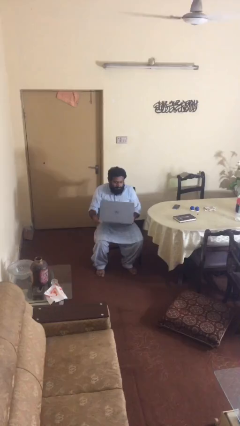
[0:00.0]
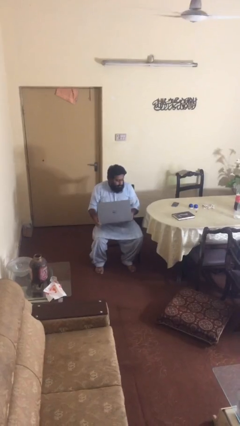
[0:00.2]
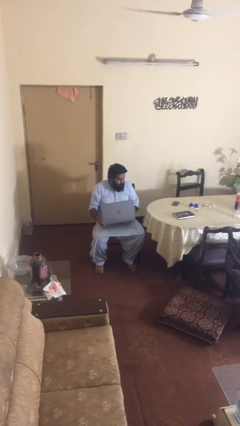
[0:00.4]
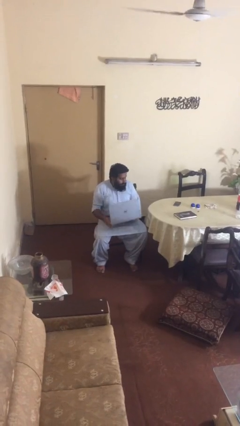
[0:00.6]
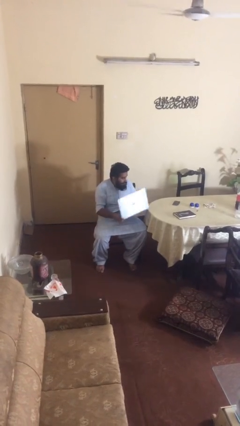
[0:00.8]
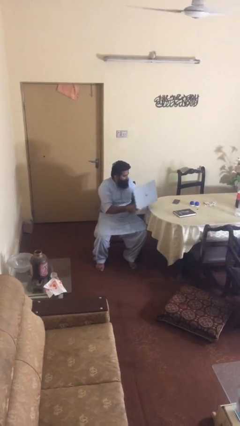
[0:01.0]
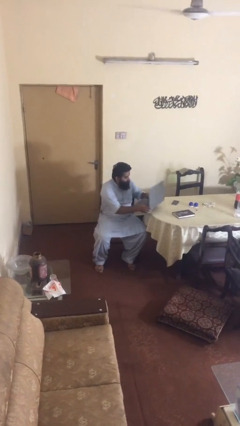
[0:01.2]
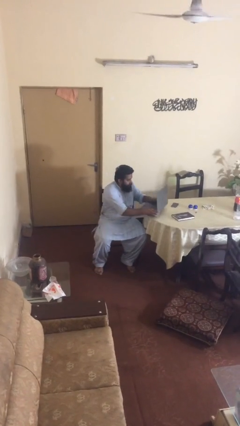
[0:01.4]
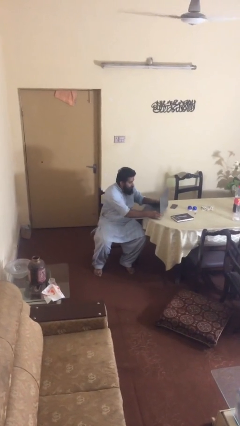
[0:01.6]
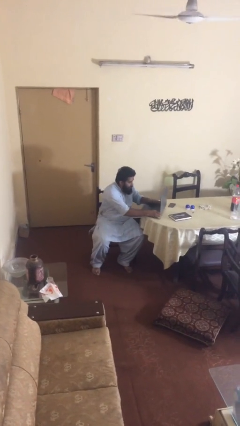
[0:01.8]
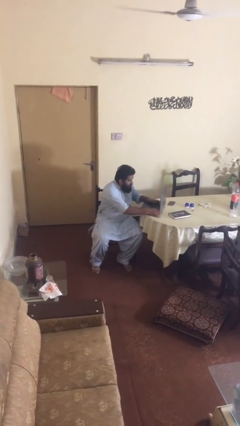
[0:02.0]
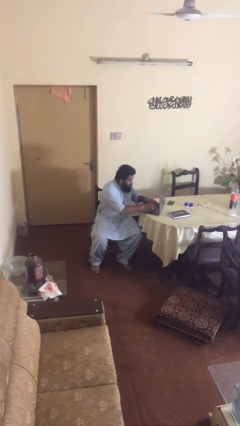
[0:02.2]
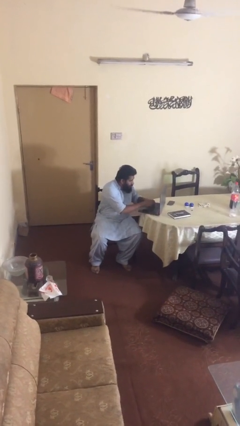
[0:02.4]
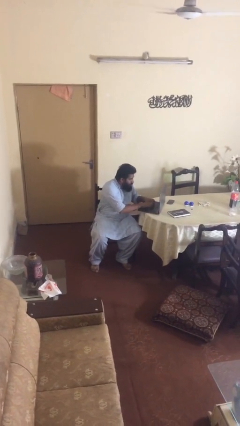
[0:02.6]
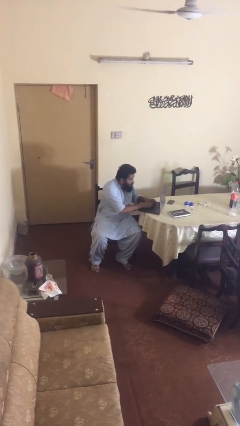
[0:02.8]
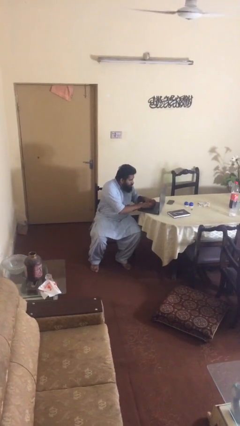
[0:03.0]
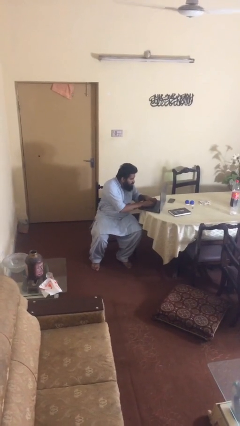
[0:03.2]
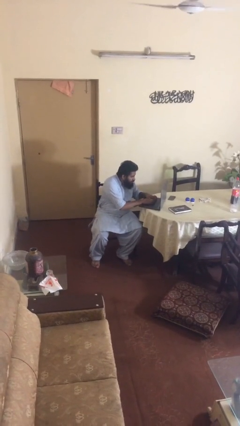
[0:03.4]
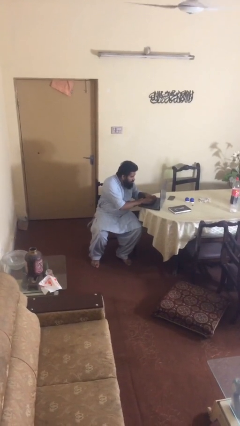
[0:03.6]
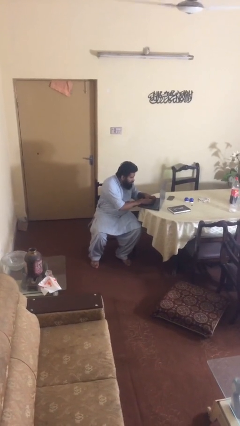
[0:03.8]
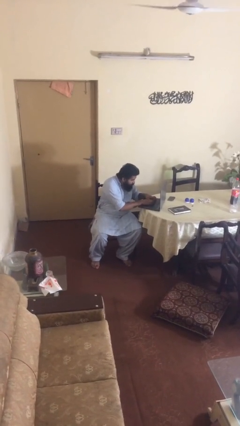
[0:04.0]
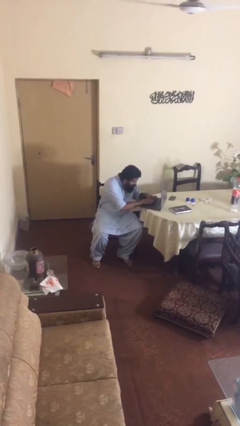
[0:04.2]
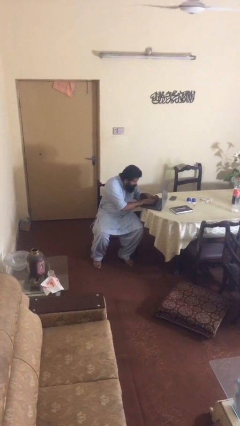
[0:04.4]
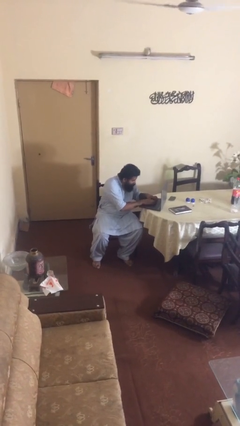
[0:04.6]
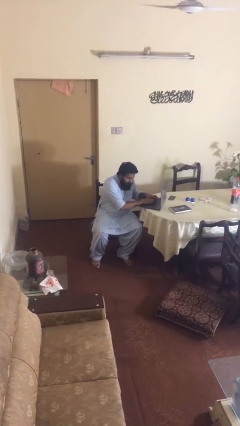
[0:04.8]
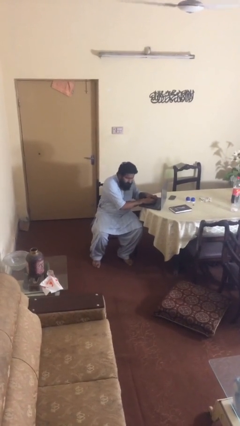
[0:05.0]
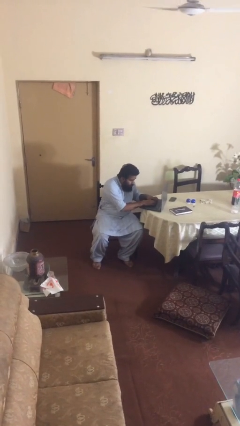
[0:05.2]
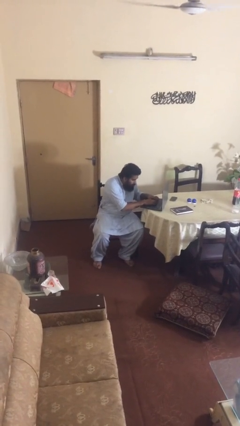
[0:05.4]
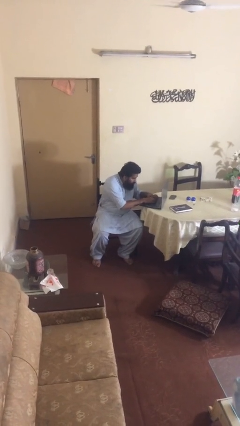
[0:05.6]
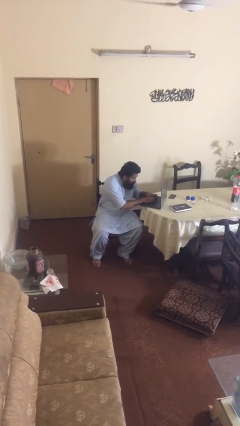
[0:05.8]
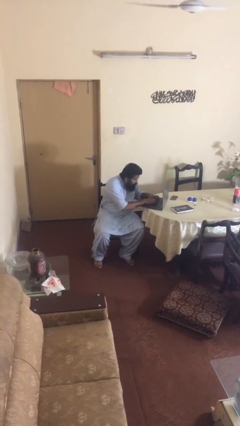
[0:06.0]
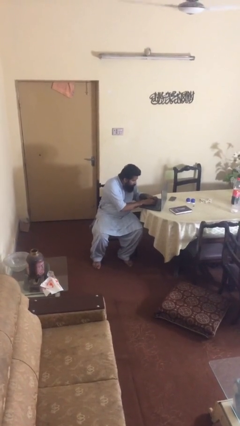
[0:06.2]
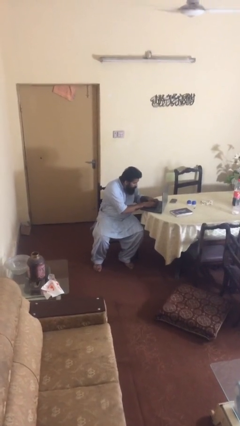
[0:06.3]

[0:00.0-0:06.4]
person interacts with laptop

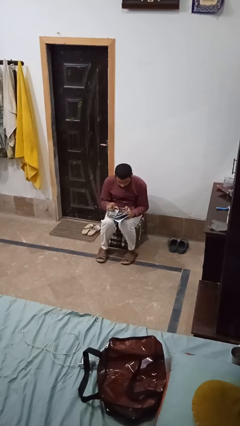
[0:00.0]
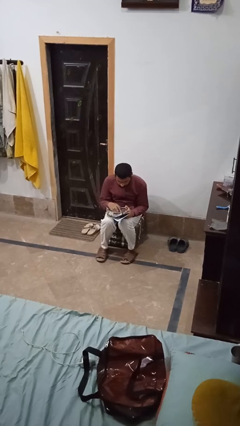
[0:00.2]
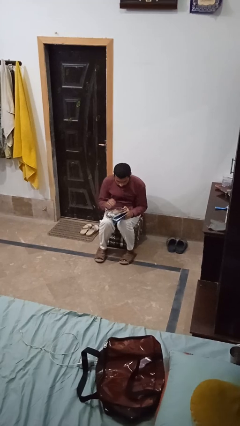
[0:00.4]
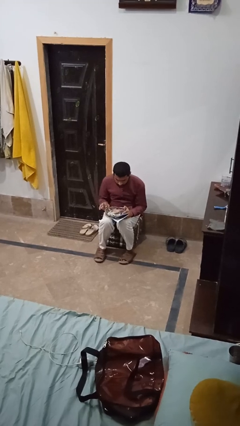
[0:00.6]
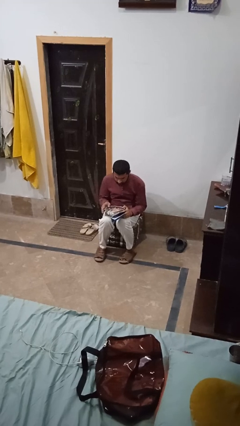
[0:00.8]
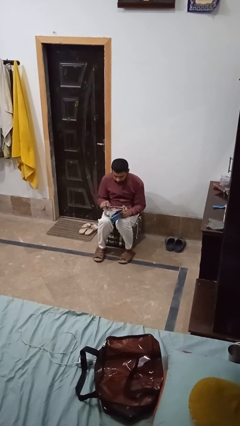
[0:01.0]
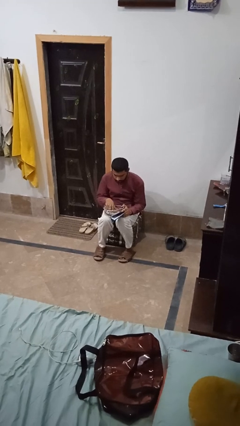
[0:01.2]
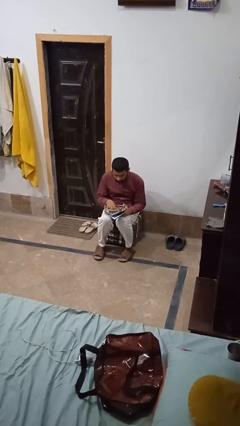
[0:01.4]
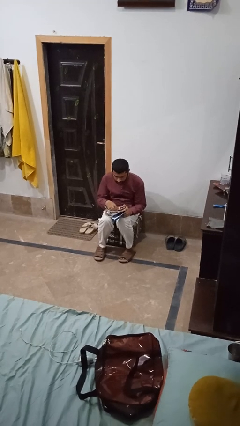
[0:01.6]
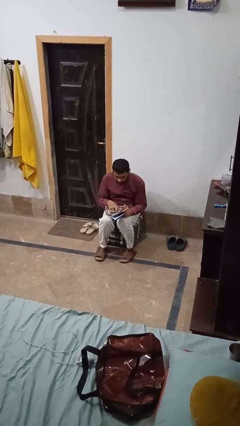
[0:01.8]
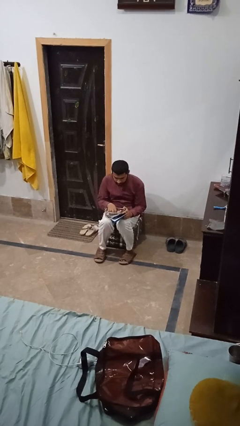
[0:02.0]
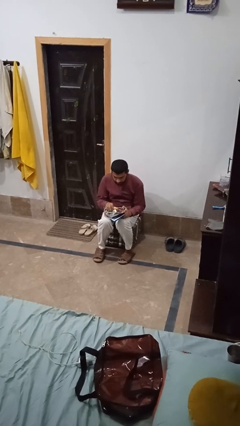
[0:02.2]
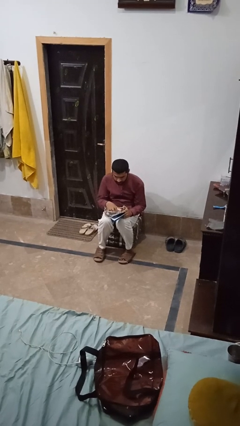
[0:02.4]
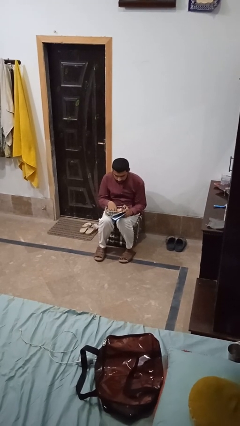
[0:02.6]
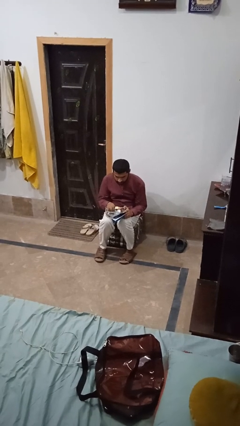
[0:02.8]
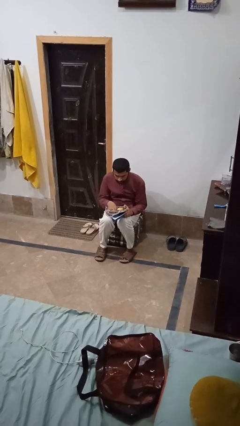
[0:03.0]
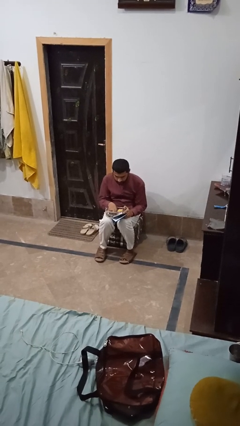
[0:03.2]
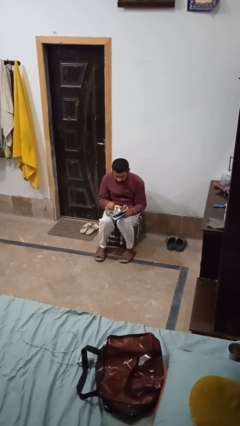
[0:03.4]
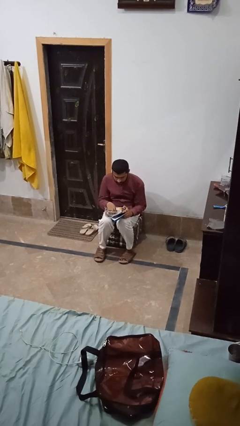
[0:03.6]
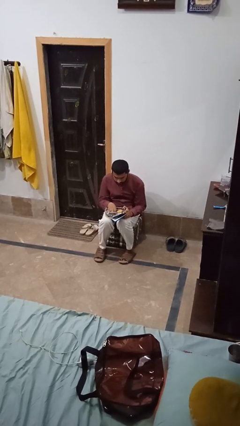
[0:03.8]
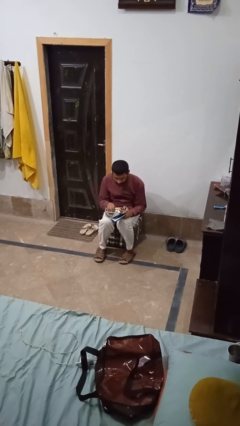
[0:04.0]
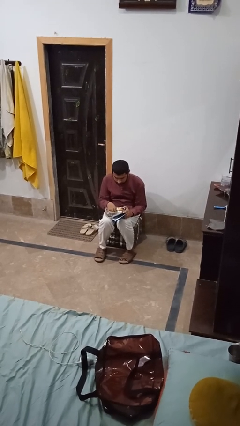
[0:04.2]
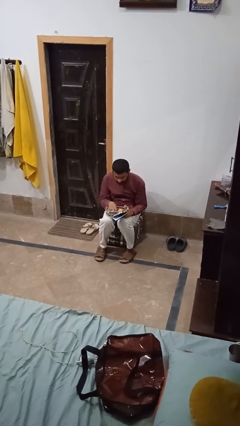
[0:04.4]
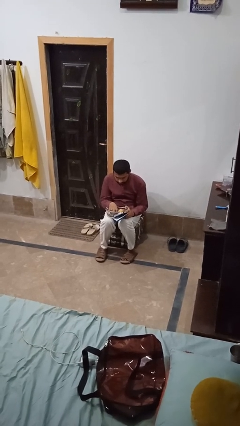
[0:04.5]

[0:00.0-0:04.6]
person searches jewelry box

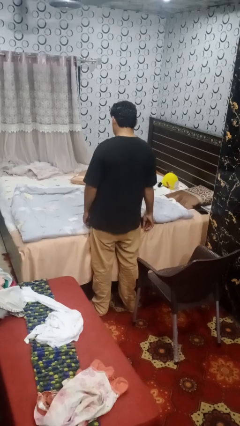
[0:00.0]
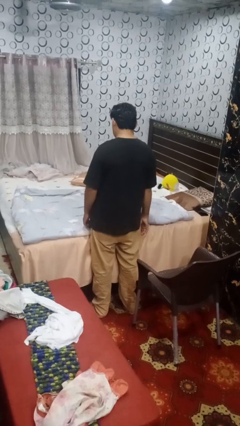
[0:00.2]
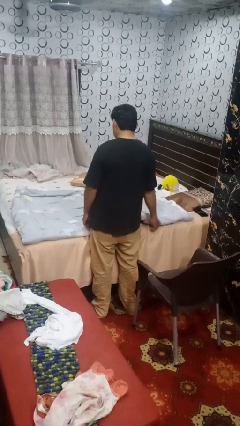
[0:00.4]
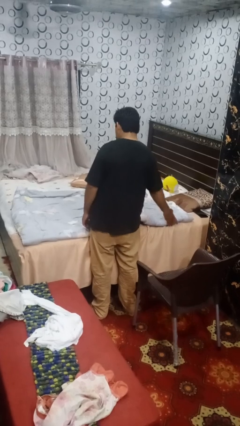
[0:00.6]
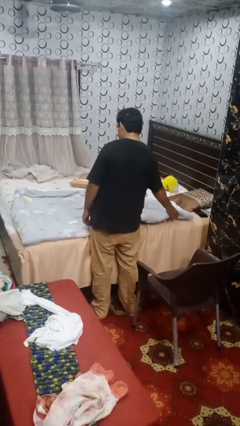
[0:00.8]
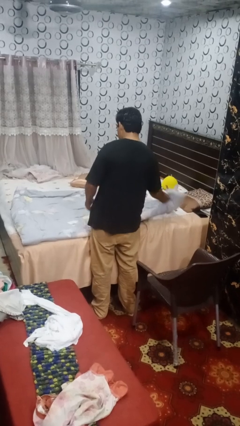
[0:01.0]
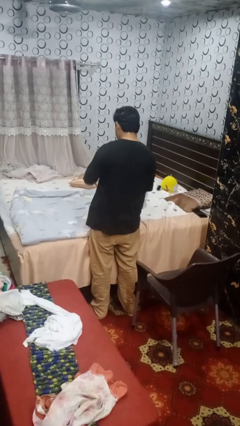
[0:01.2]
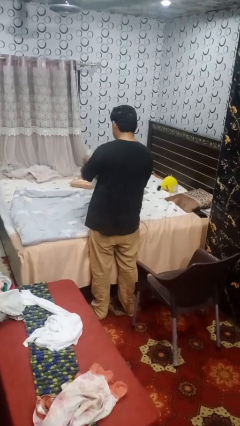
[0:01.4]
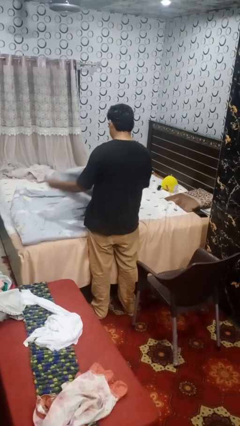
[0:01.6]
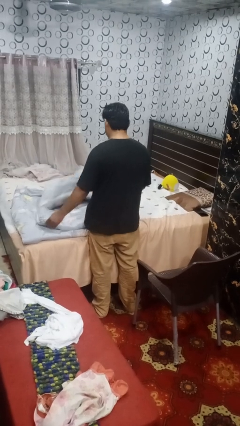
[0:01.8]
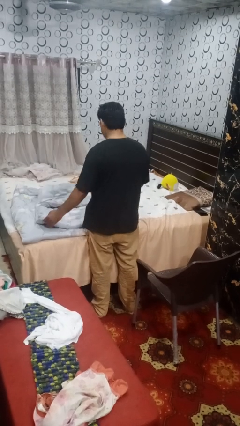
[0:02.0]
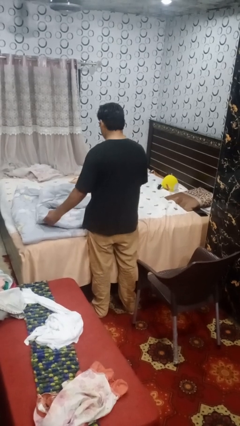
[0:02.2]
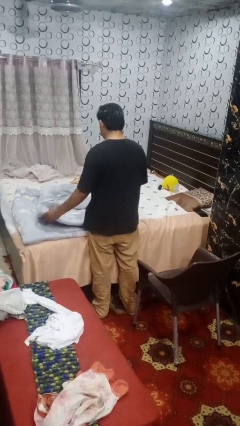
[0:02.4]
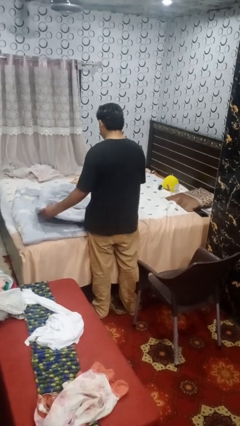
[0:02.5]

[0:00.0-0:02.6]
person folds blanket

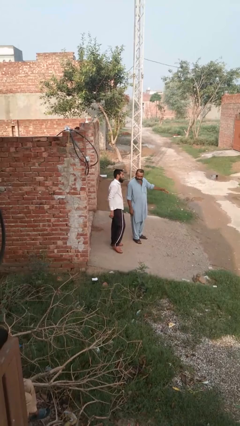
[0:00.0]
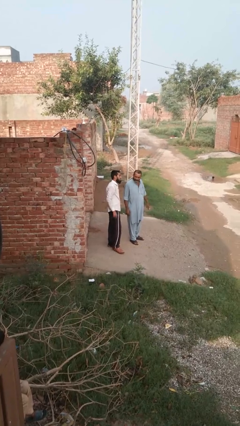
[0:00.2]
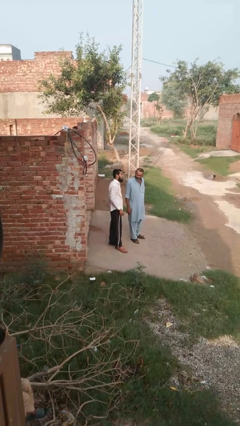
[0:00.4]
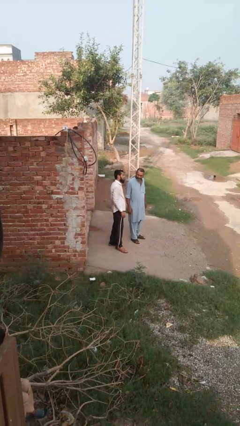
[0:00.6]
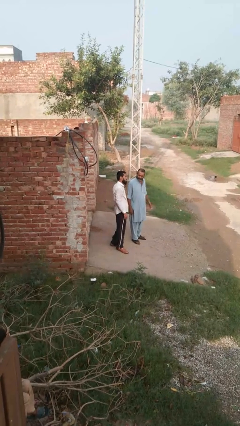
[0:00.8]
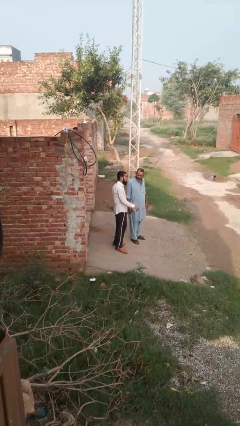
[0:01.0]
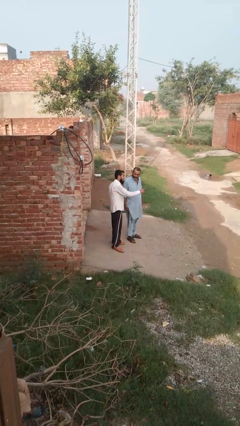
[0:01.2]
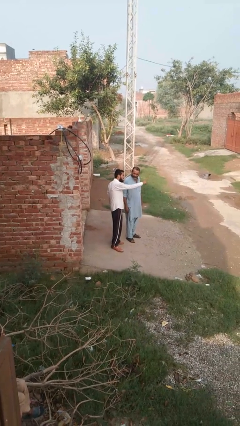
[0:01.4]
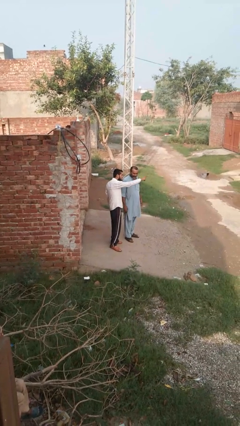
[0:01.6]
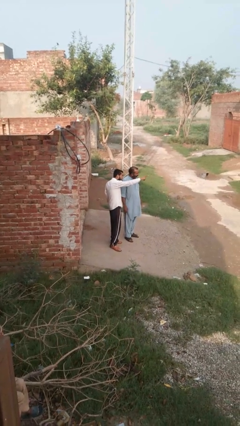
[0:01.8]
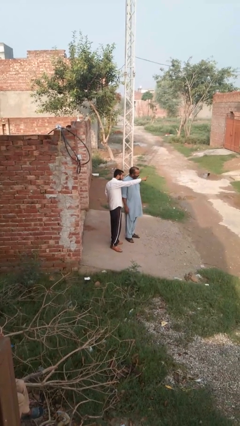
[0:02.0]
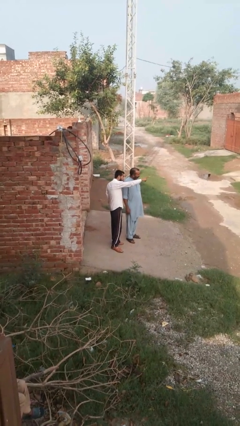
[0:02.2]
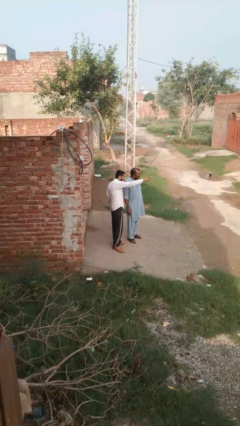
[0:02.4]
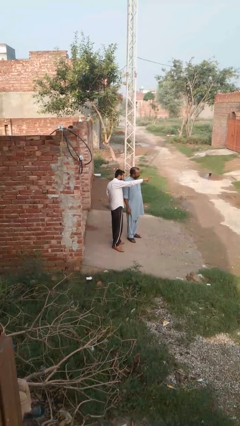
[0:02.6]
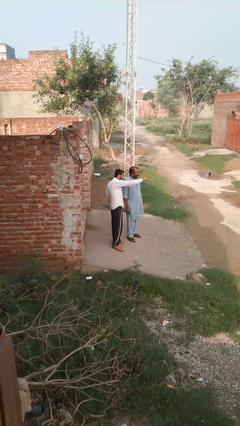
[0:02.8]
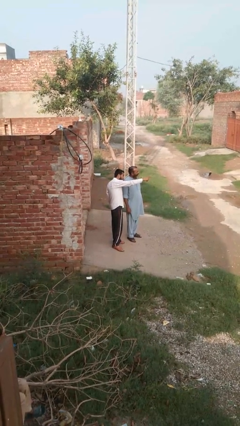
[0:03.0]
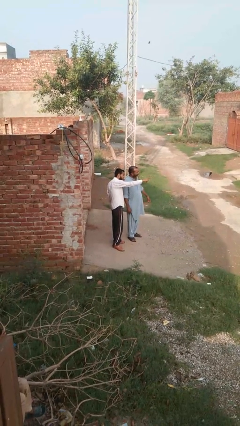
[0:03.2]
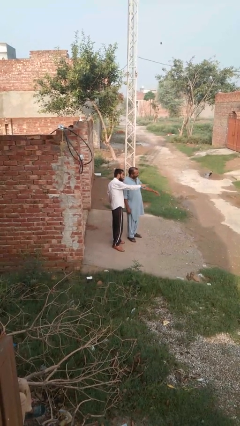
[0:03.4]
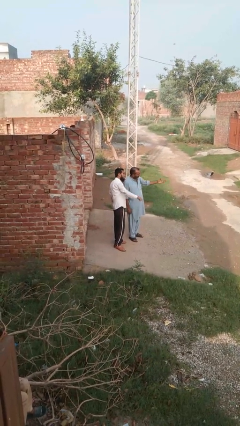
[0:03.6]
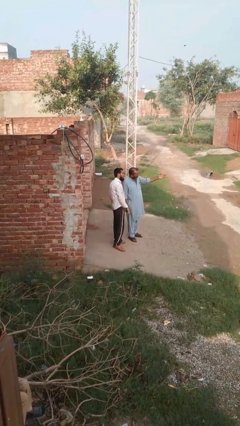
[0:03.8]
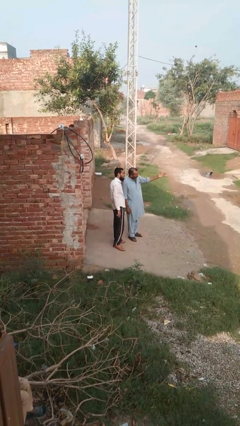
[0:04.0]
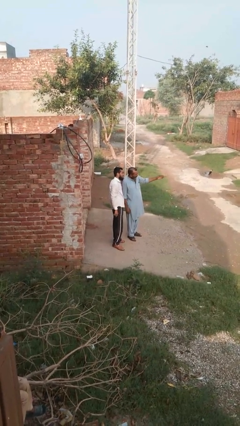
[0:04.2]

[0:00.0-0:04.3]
person points at person

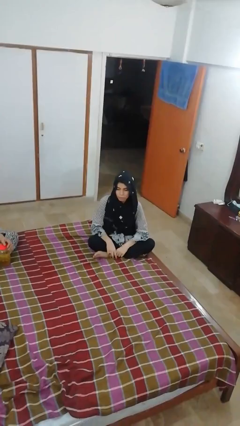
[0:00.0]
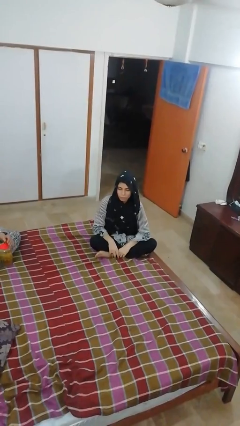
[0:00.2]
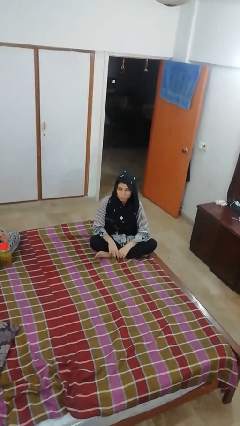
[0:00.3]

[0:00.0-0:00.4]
person shakes head
